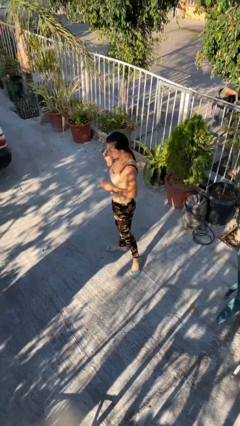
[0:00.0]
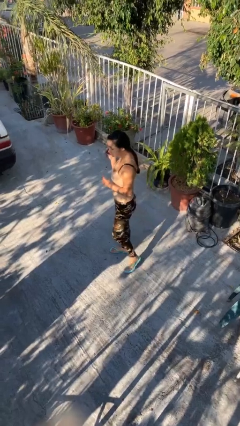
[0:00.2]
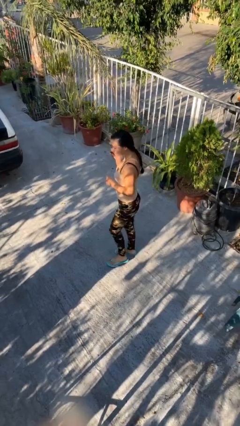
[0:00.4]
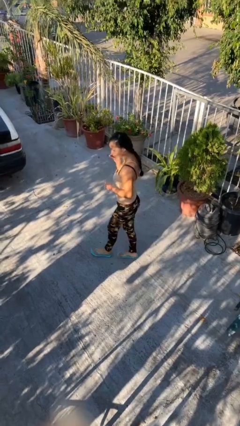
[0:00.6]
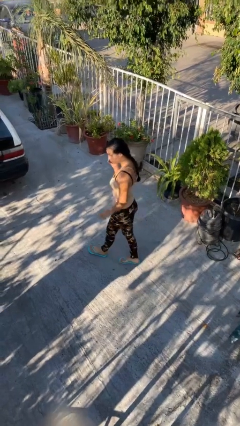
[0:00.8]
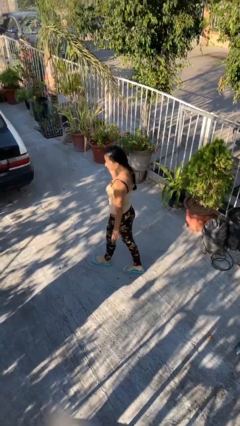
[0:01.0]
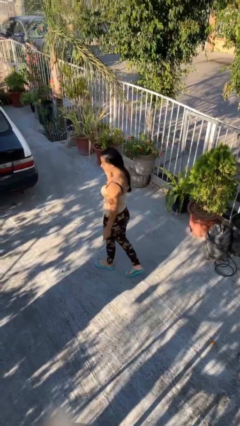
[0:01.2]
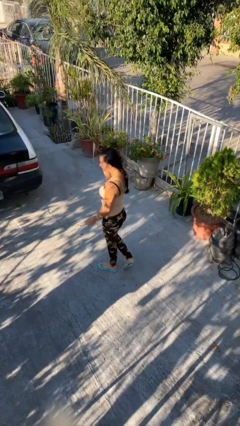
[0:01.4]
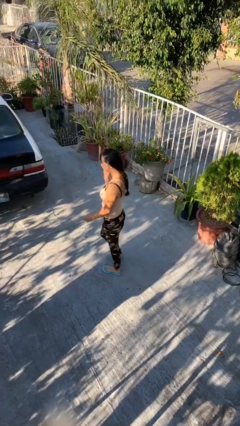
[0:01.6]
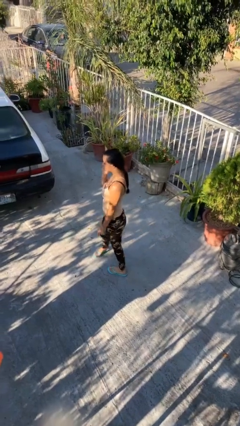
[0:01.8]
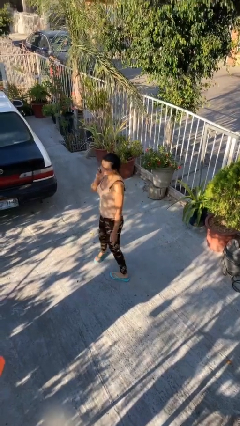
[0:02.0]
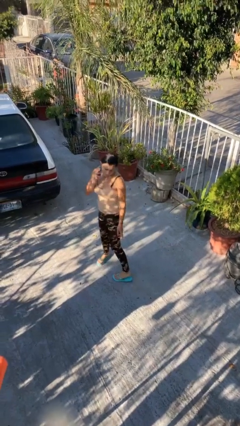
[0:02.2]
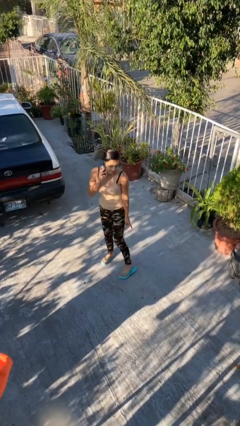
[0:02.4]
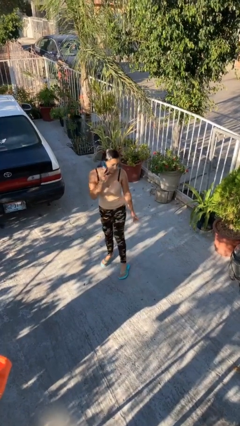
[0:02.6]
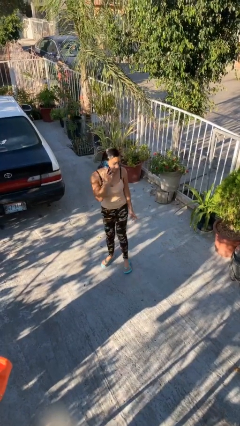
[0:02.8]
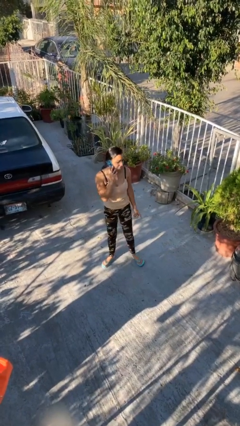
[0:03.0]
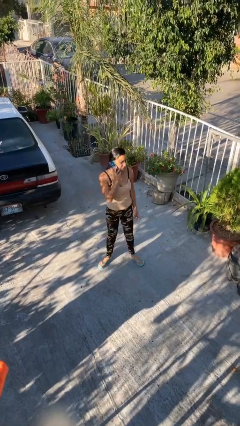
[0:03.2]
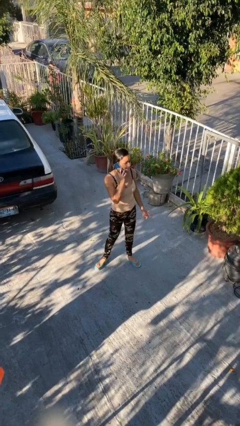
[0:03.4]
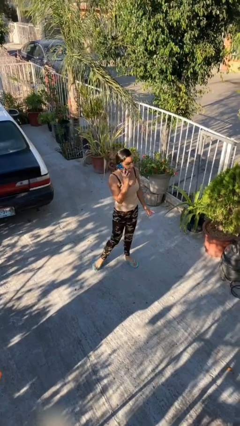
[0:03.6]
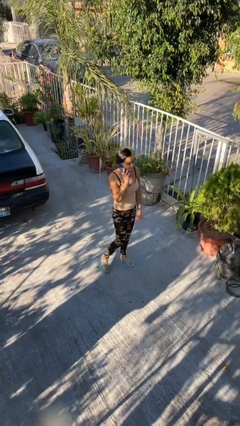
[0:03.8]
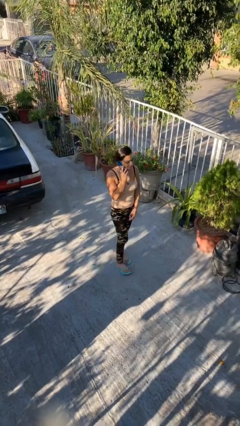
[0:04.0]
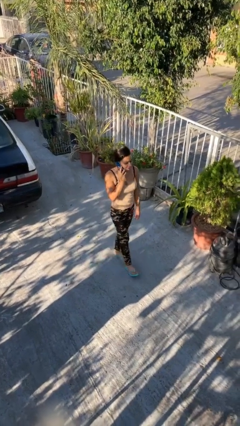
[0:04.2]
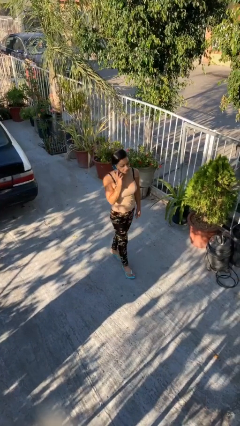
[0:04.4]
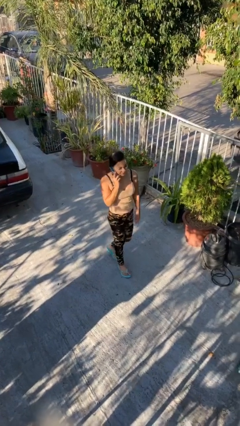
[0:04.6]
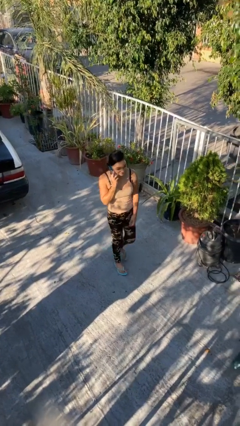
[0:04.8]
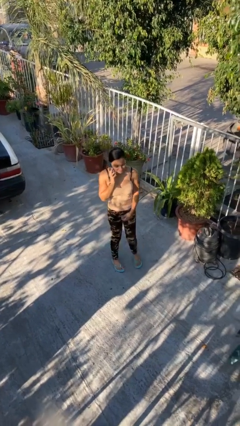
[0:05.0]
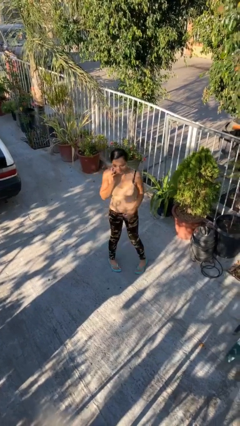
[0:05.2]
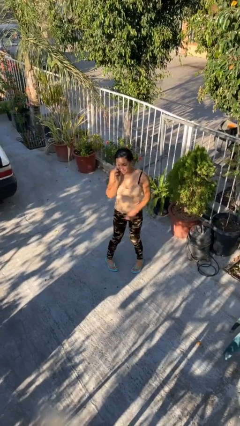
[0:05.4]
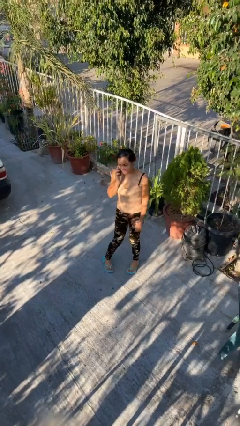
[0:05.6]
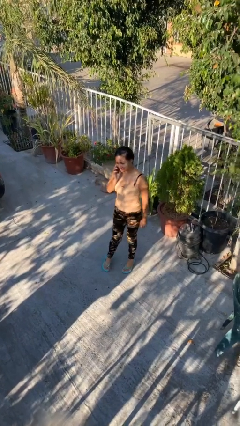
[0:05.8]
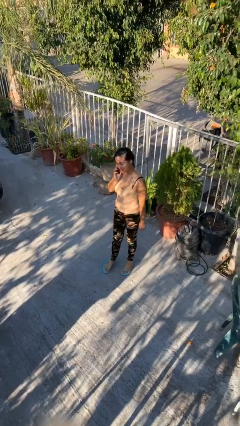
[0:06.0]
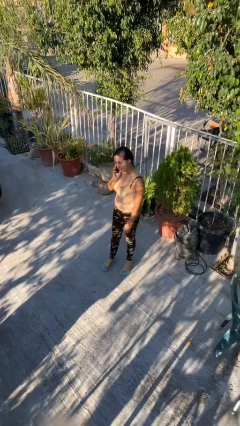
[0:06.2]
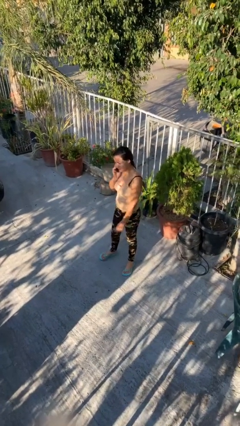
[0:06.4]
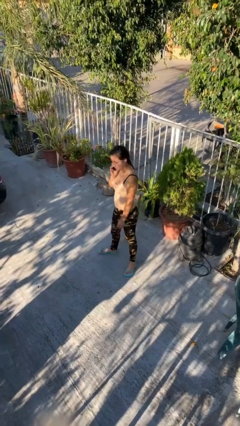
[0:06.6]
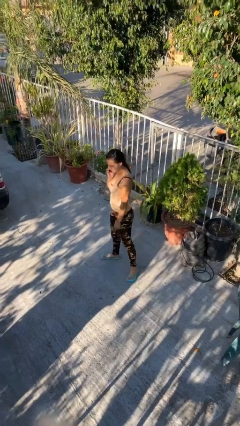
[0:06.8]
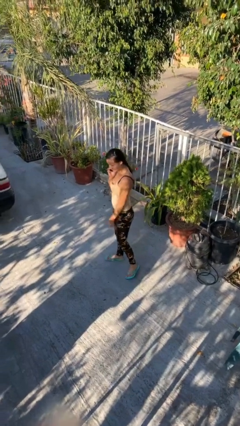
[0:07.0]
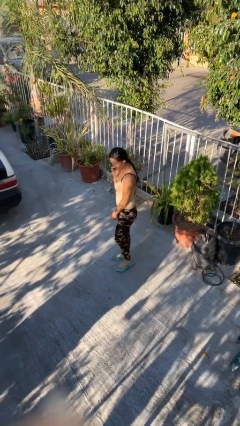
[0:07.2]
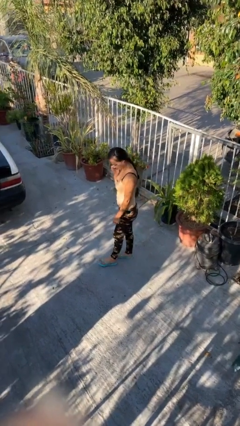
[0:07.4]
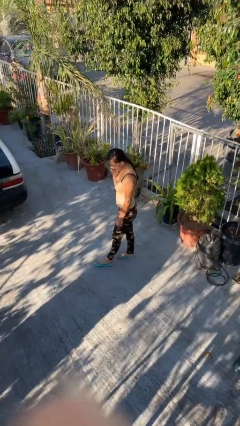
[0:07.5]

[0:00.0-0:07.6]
person talks on phone

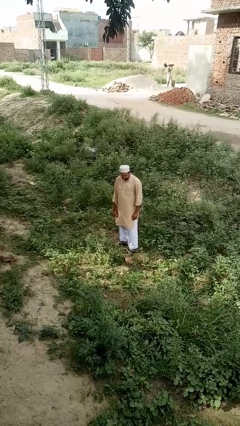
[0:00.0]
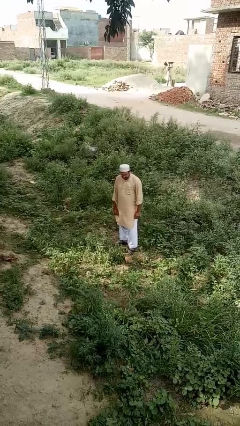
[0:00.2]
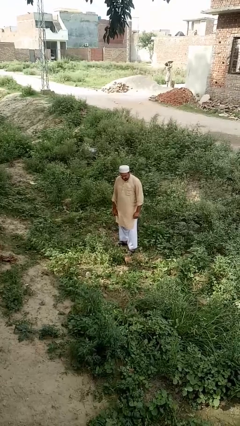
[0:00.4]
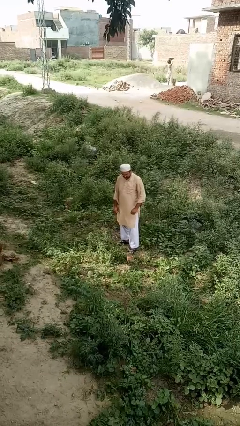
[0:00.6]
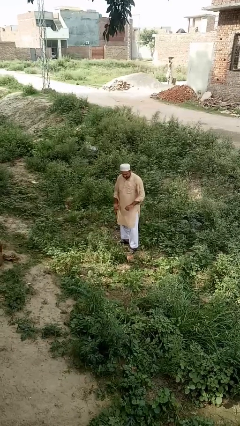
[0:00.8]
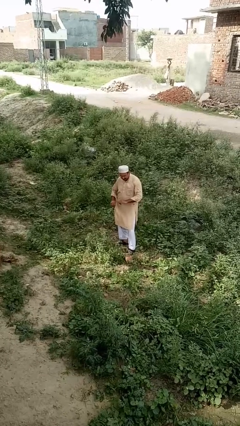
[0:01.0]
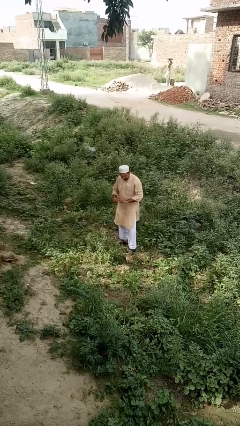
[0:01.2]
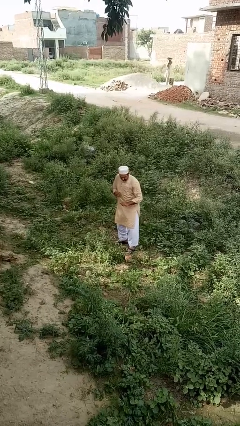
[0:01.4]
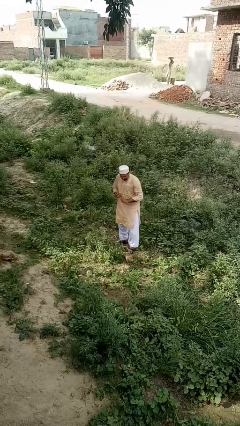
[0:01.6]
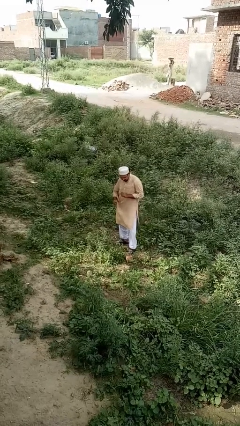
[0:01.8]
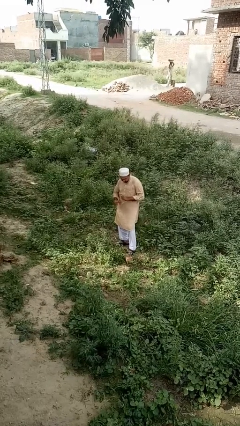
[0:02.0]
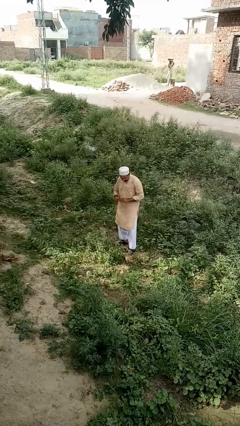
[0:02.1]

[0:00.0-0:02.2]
person dances in place

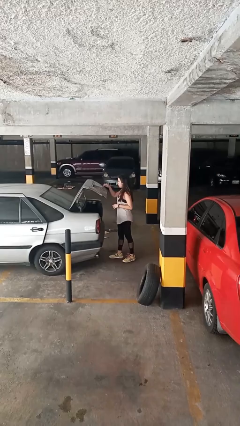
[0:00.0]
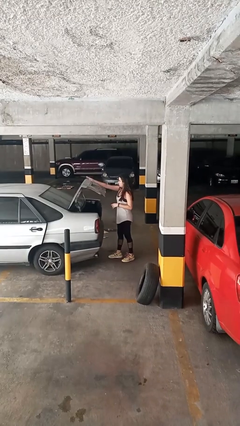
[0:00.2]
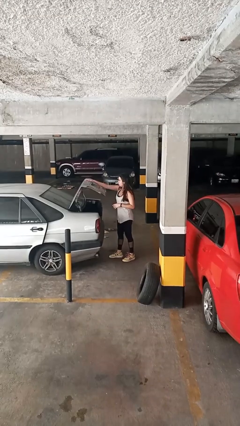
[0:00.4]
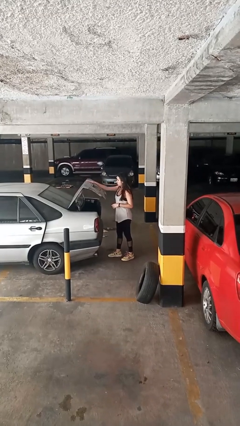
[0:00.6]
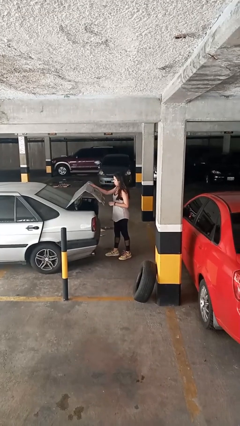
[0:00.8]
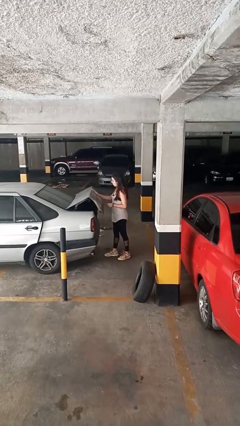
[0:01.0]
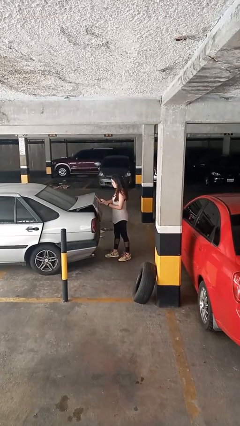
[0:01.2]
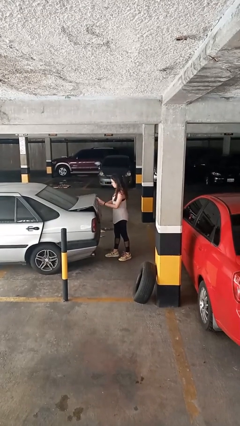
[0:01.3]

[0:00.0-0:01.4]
person closes car trunk

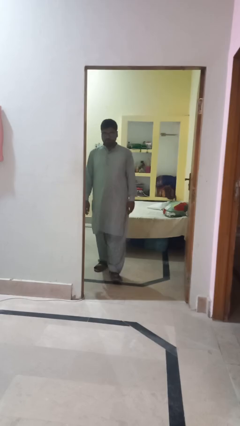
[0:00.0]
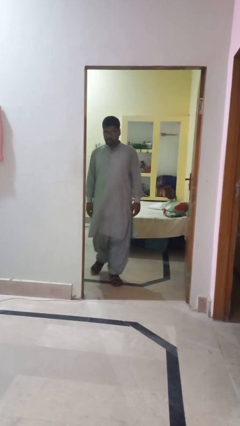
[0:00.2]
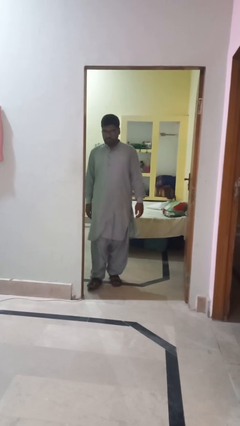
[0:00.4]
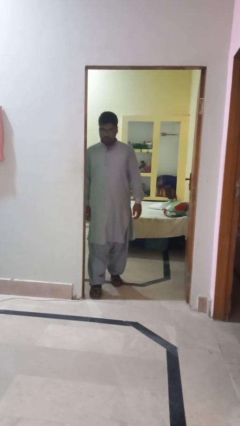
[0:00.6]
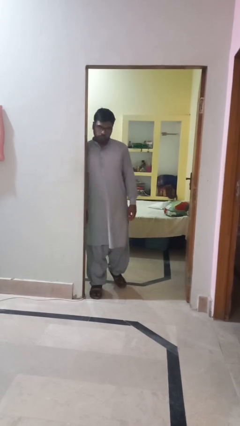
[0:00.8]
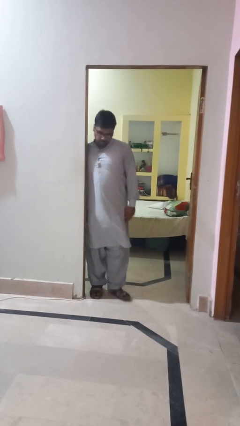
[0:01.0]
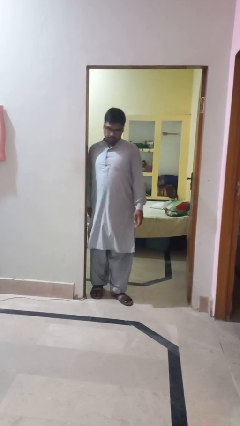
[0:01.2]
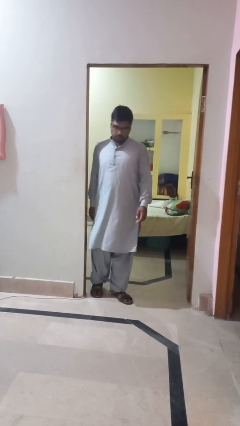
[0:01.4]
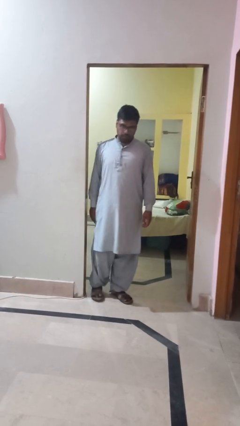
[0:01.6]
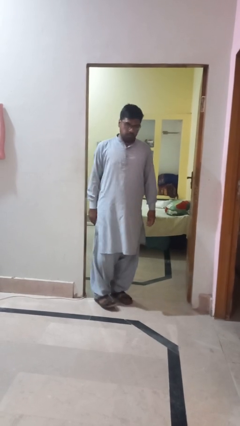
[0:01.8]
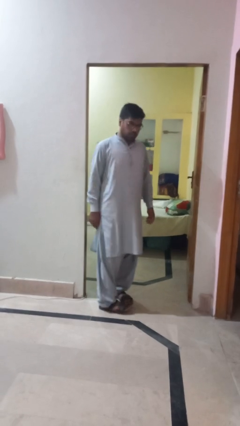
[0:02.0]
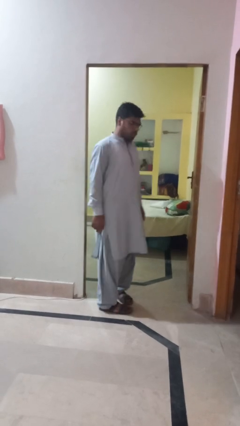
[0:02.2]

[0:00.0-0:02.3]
person bumps into wall

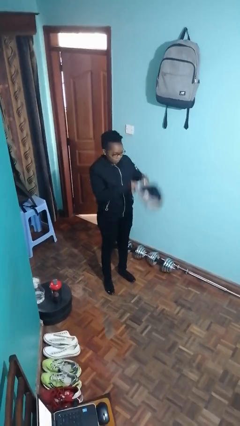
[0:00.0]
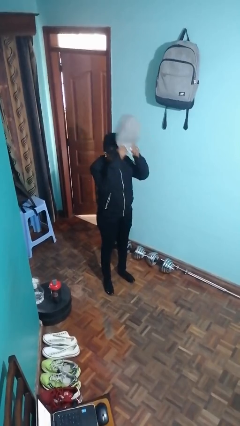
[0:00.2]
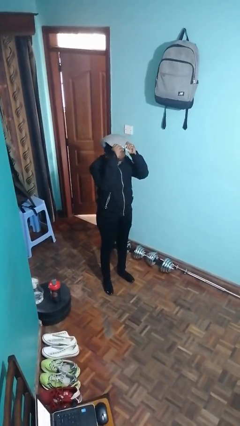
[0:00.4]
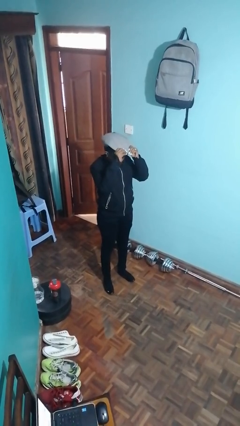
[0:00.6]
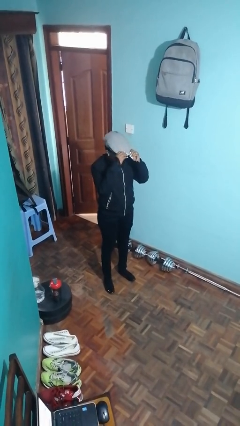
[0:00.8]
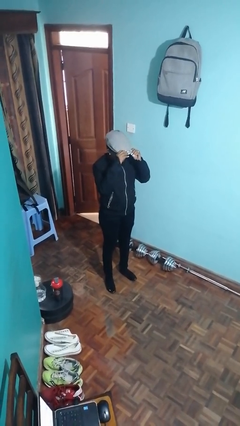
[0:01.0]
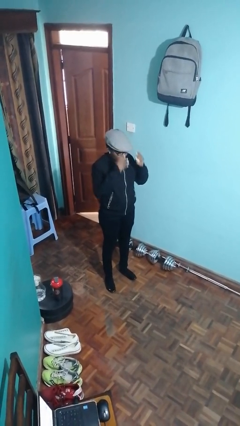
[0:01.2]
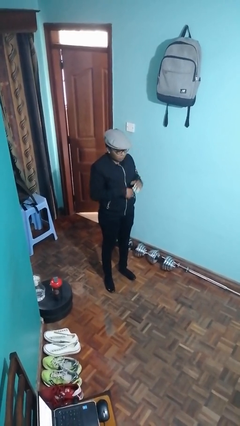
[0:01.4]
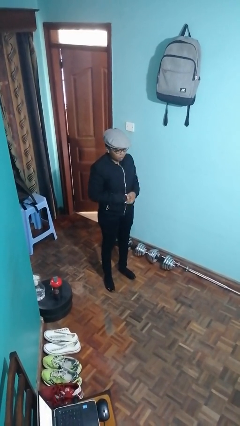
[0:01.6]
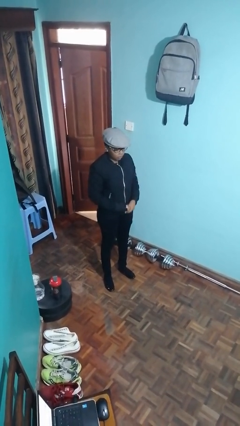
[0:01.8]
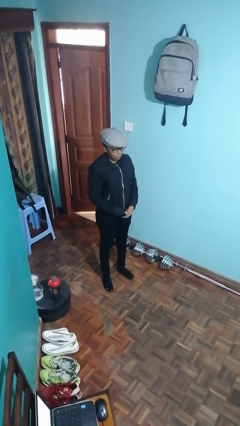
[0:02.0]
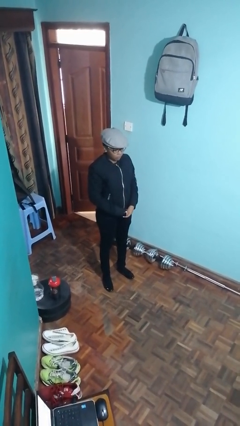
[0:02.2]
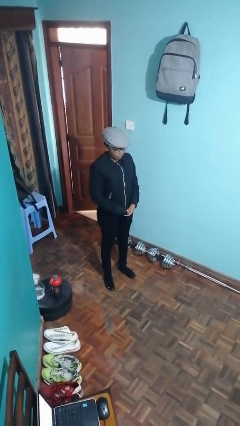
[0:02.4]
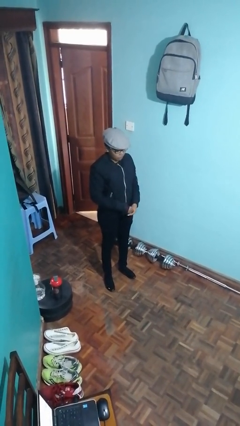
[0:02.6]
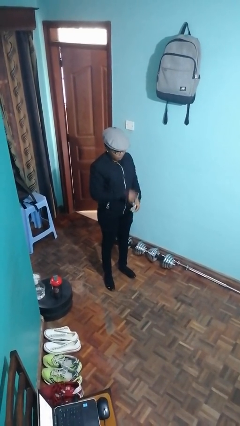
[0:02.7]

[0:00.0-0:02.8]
person puts on hat

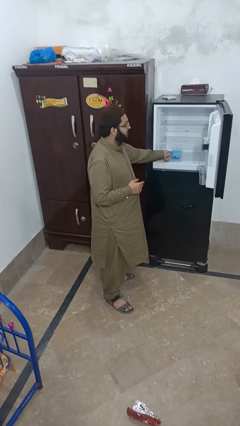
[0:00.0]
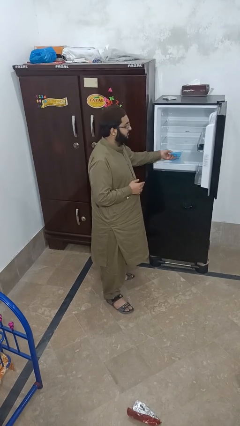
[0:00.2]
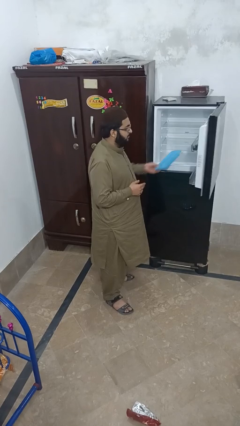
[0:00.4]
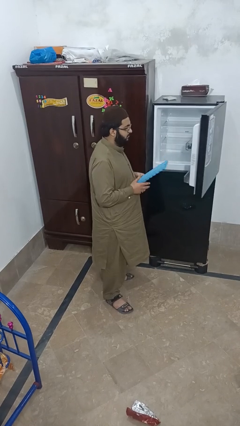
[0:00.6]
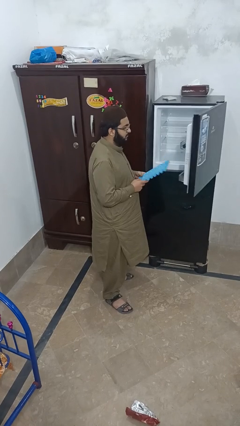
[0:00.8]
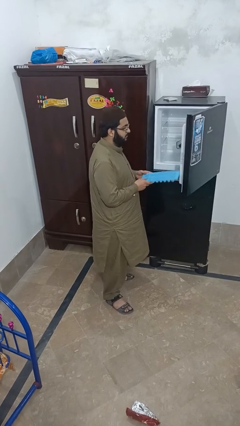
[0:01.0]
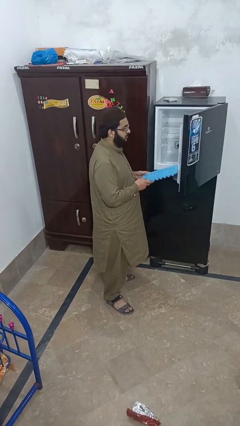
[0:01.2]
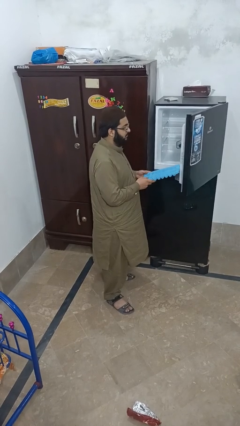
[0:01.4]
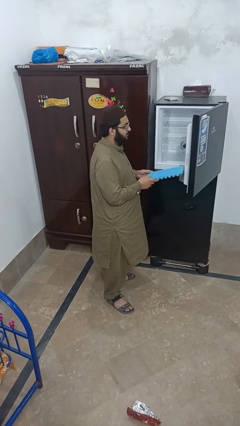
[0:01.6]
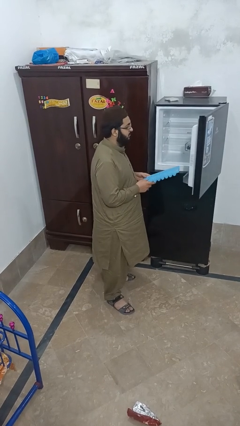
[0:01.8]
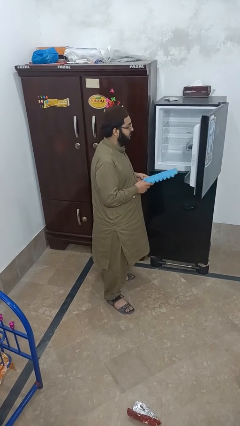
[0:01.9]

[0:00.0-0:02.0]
person takes object from refrigerator
